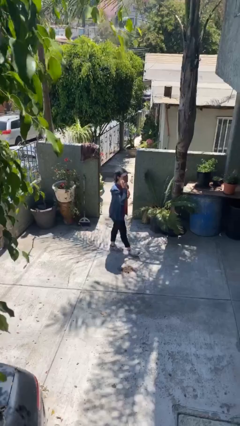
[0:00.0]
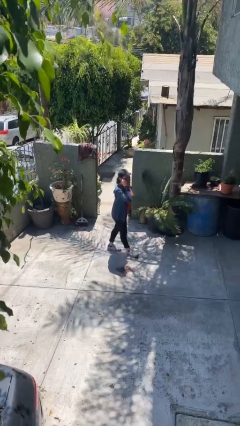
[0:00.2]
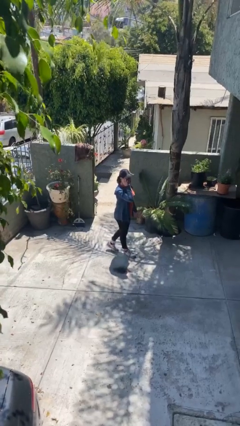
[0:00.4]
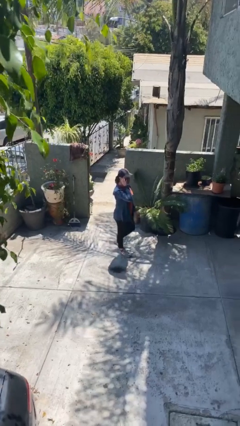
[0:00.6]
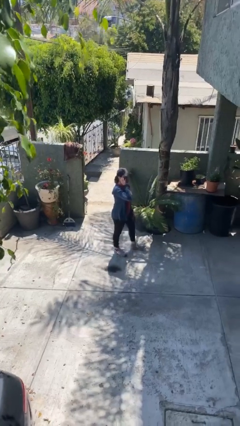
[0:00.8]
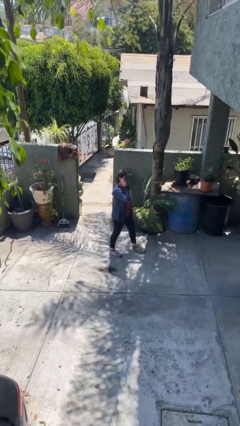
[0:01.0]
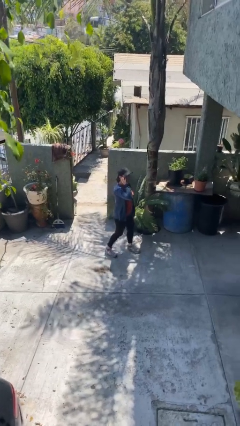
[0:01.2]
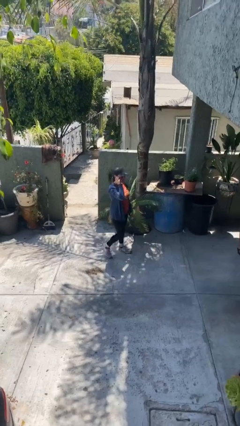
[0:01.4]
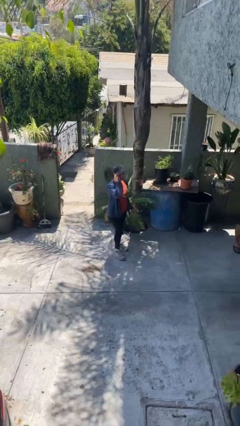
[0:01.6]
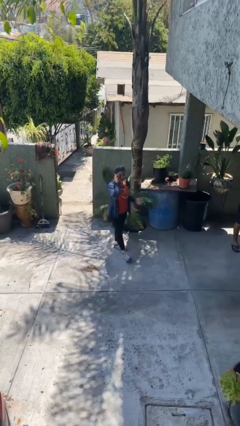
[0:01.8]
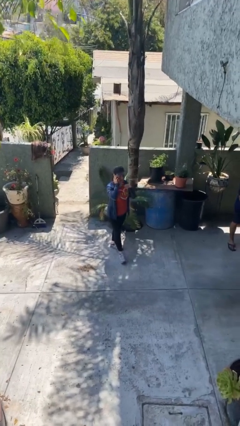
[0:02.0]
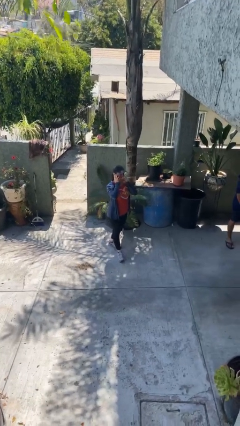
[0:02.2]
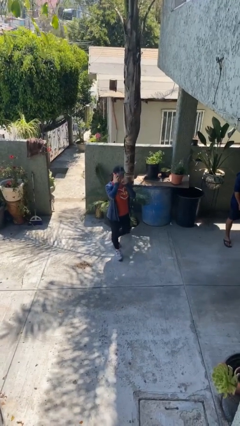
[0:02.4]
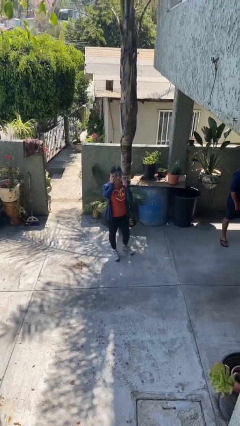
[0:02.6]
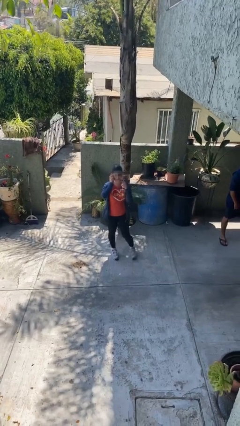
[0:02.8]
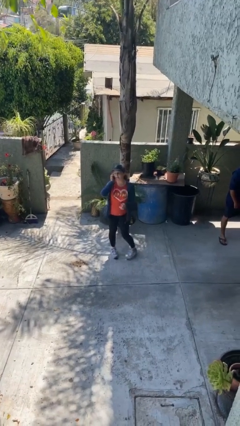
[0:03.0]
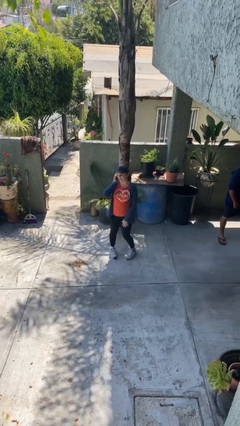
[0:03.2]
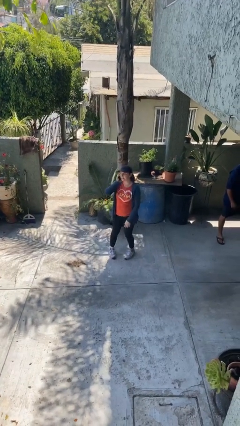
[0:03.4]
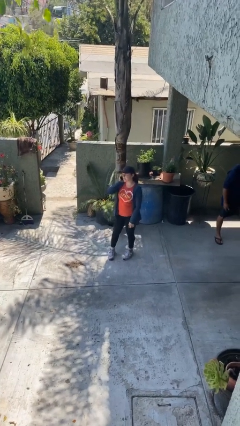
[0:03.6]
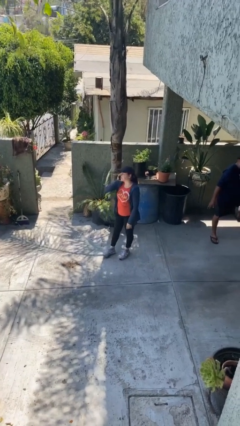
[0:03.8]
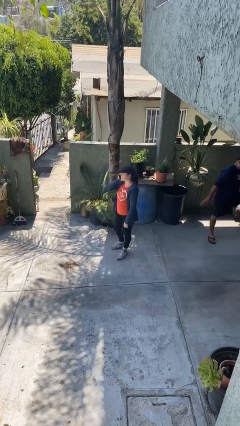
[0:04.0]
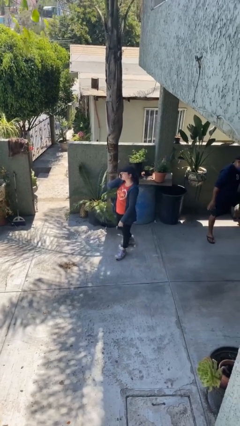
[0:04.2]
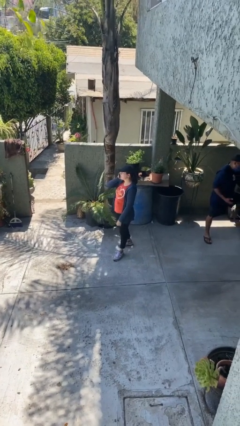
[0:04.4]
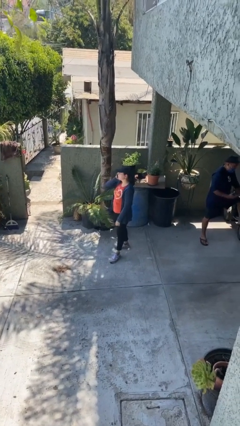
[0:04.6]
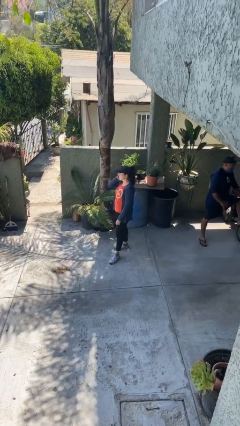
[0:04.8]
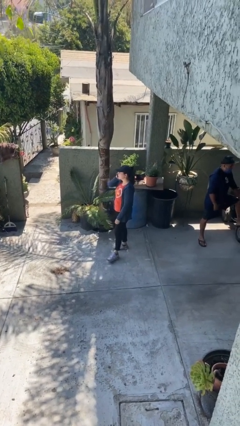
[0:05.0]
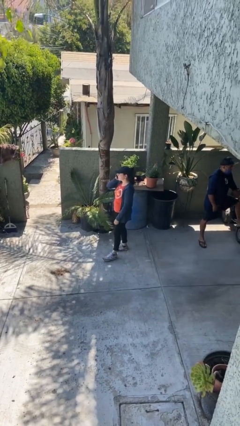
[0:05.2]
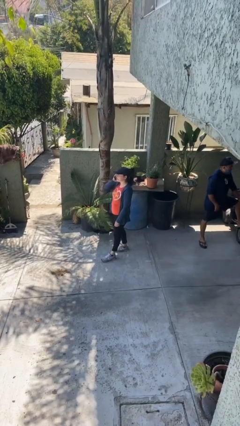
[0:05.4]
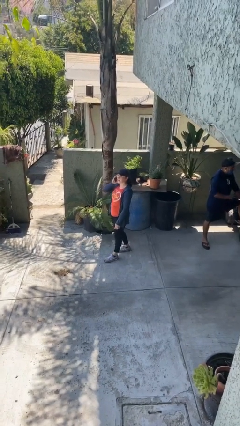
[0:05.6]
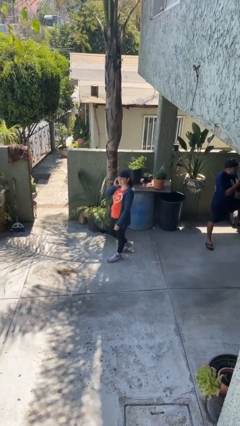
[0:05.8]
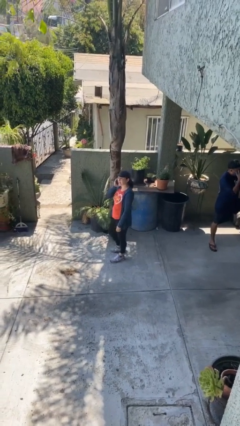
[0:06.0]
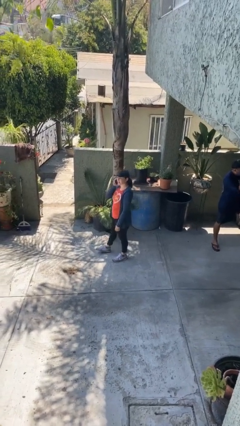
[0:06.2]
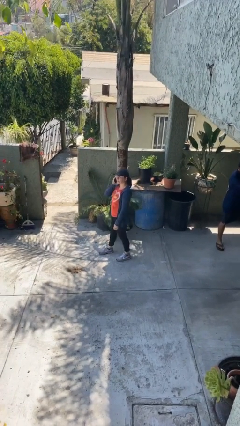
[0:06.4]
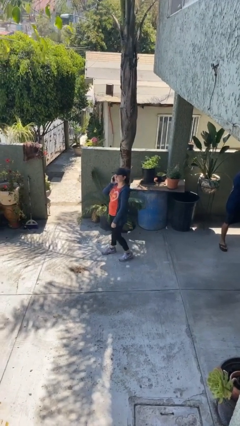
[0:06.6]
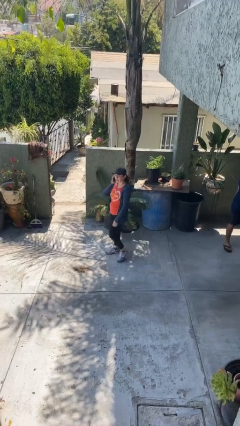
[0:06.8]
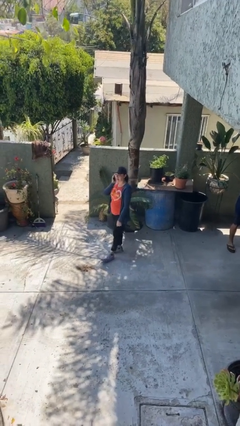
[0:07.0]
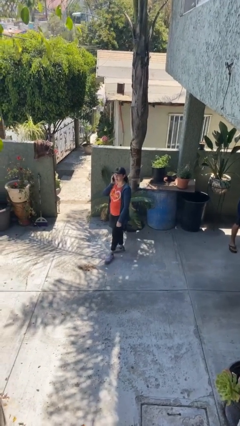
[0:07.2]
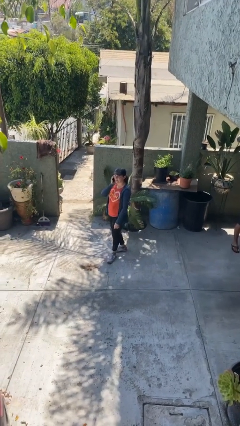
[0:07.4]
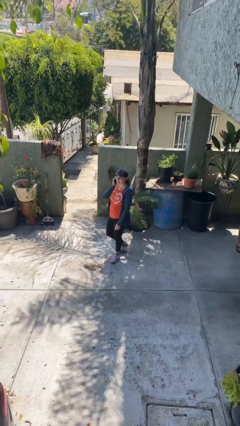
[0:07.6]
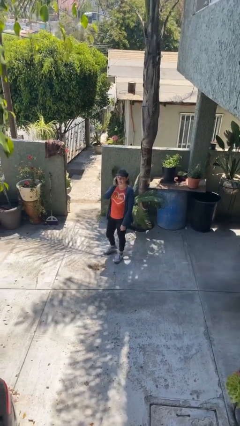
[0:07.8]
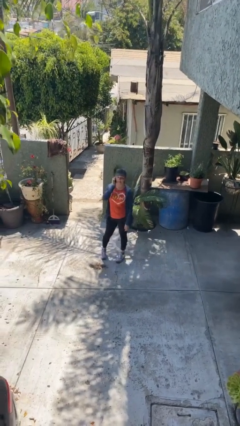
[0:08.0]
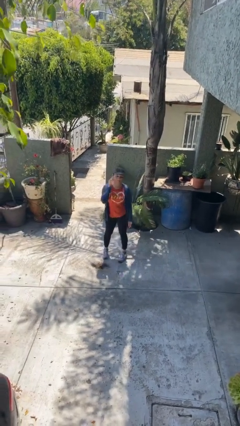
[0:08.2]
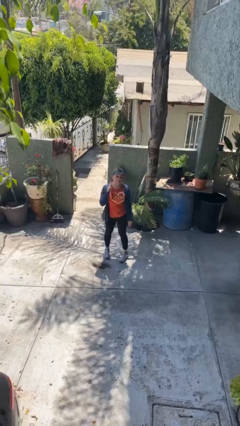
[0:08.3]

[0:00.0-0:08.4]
person talks on phone

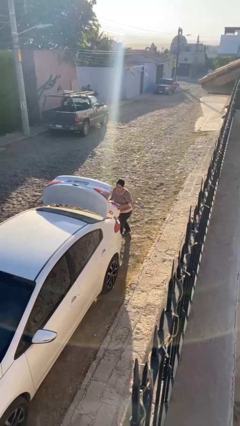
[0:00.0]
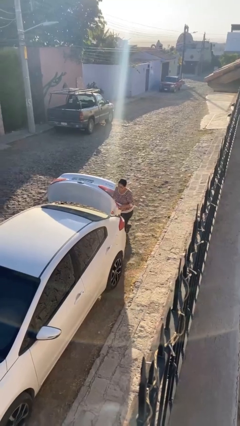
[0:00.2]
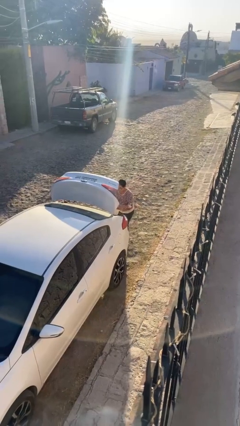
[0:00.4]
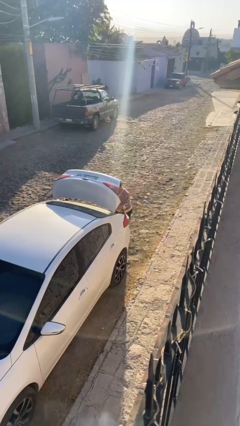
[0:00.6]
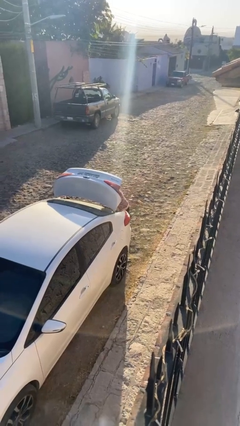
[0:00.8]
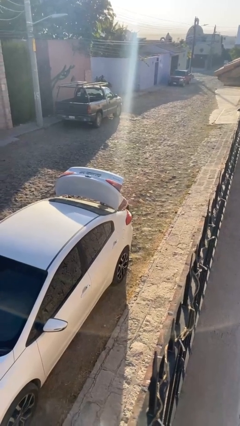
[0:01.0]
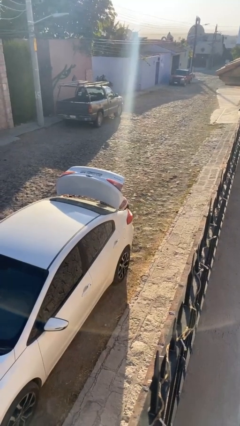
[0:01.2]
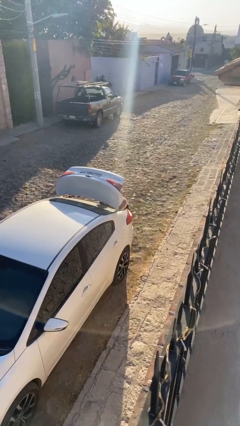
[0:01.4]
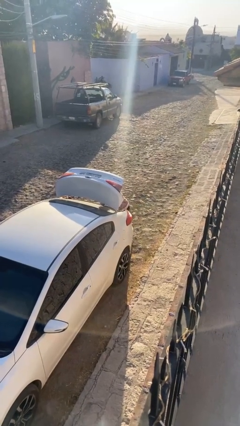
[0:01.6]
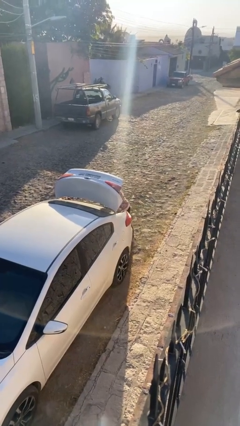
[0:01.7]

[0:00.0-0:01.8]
person loads car

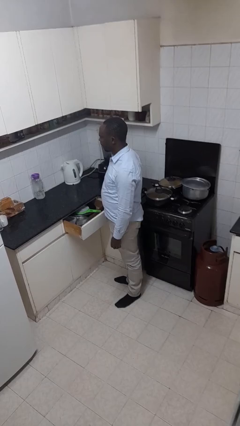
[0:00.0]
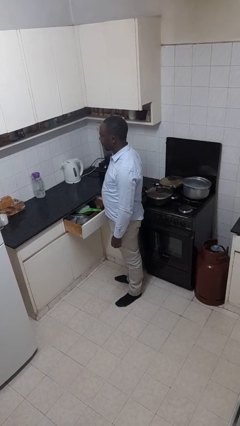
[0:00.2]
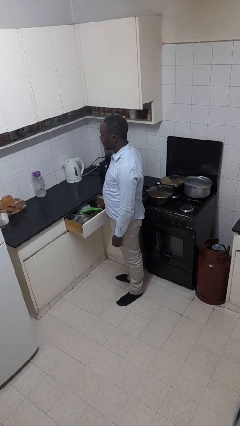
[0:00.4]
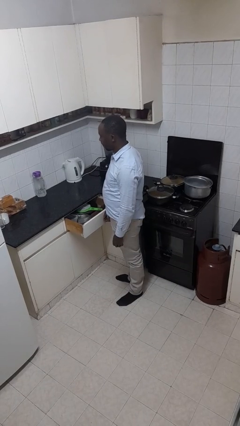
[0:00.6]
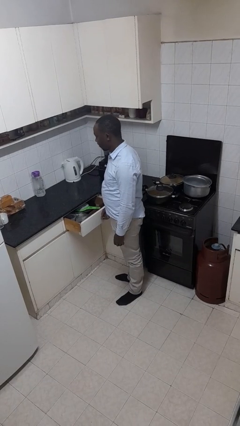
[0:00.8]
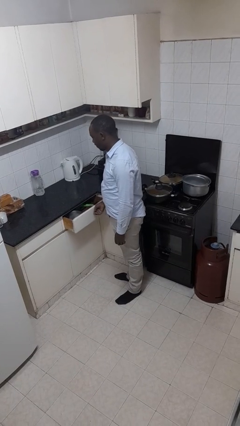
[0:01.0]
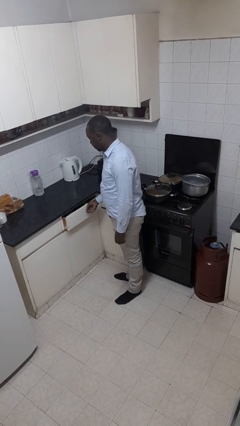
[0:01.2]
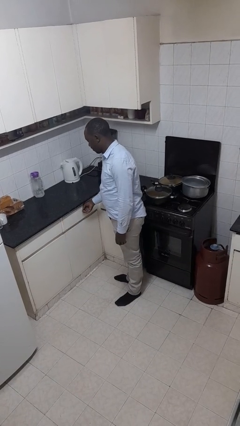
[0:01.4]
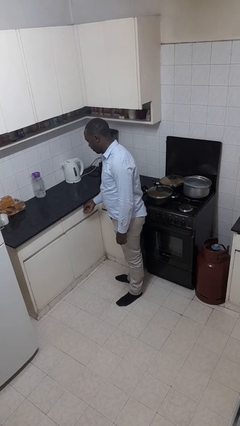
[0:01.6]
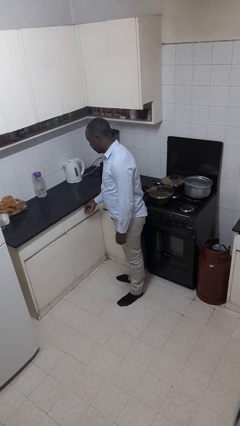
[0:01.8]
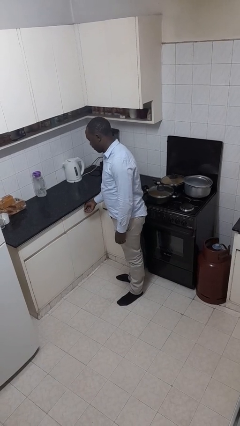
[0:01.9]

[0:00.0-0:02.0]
person closes kitchen drawer

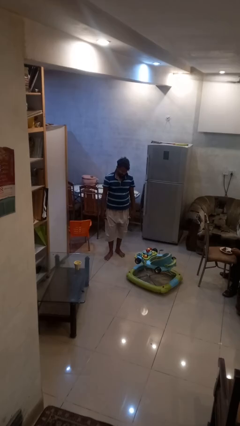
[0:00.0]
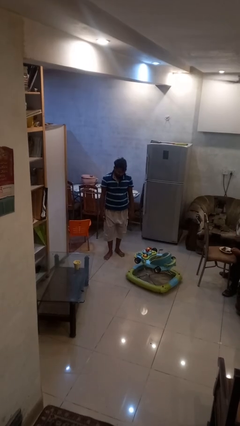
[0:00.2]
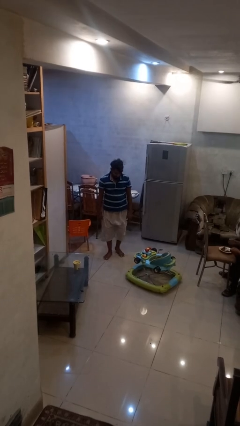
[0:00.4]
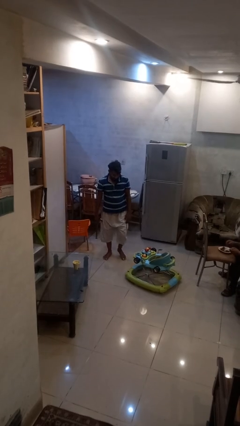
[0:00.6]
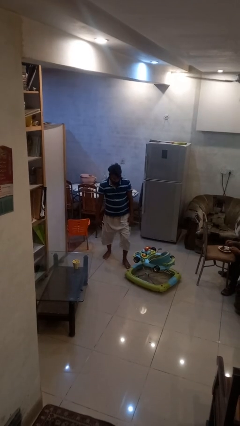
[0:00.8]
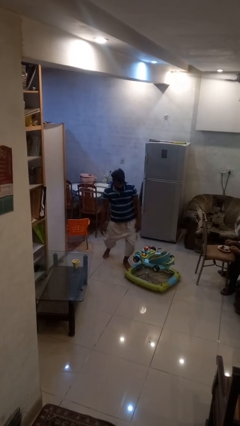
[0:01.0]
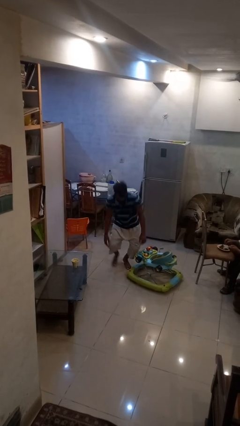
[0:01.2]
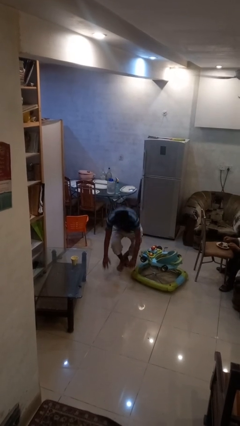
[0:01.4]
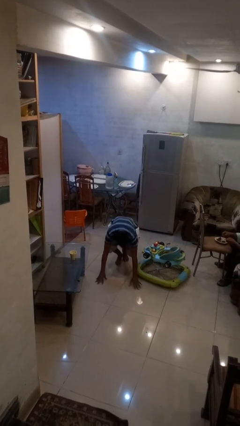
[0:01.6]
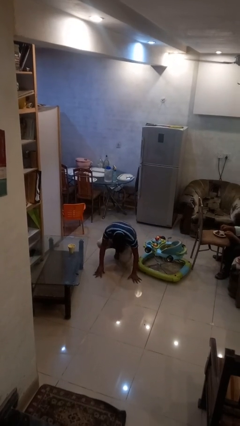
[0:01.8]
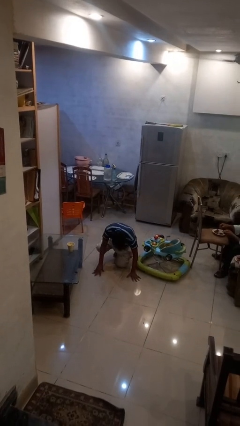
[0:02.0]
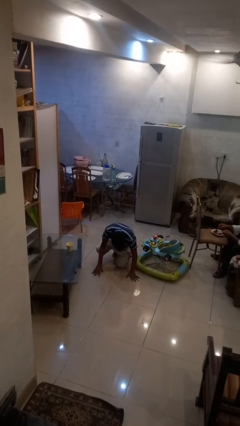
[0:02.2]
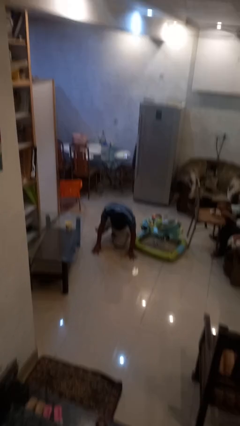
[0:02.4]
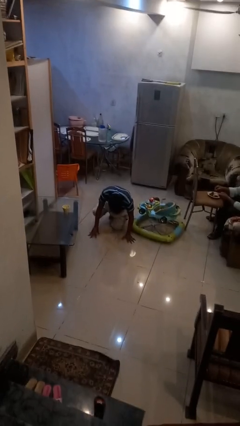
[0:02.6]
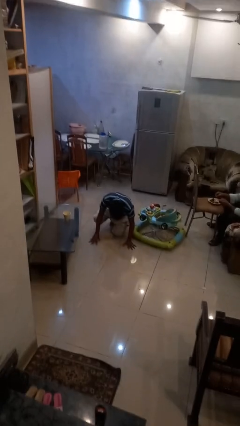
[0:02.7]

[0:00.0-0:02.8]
person trips on object on floor

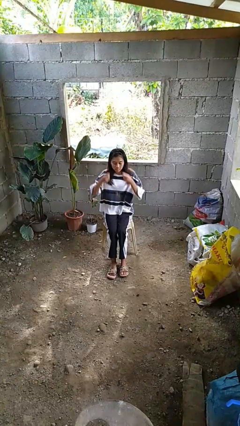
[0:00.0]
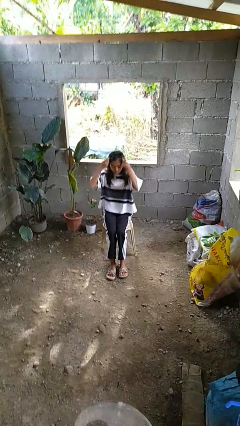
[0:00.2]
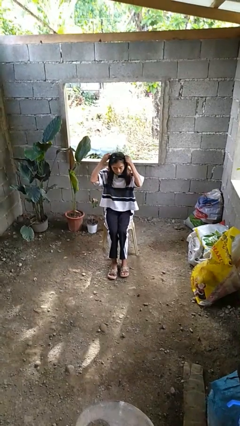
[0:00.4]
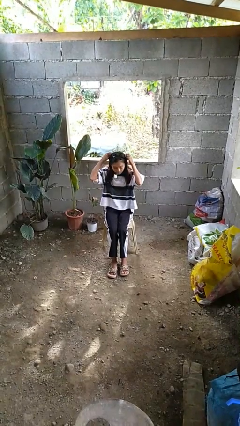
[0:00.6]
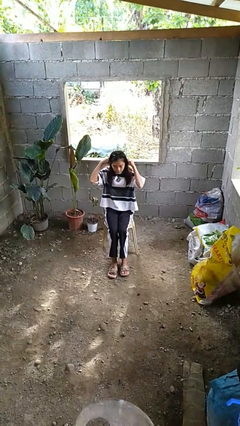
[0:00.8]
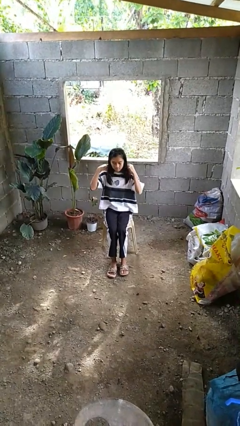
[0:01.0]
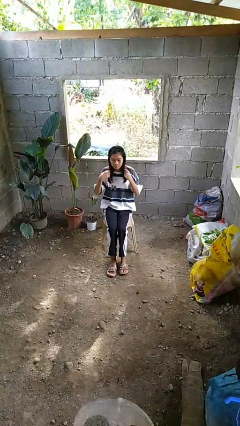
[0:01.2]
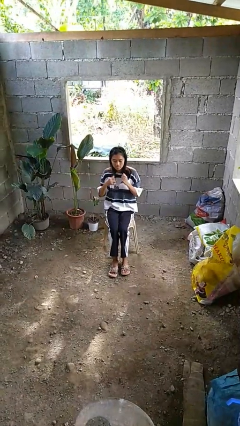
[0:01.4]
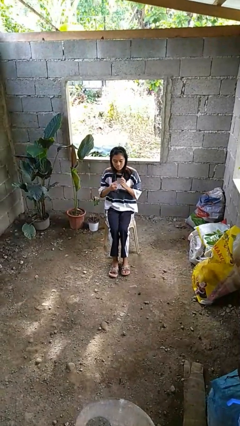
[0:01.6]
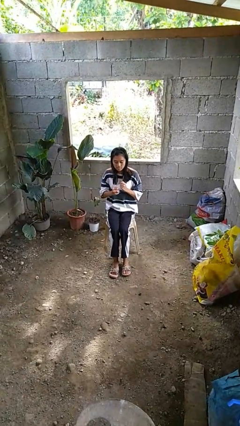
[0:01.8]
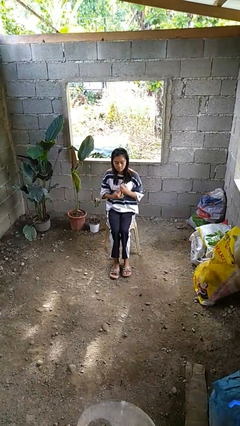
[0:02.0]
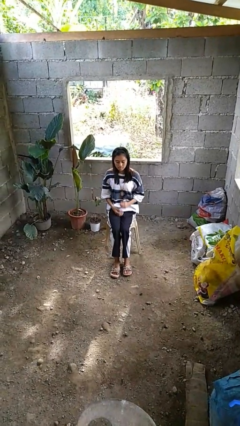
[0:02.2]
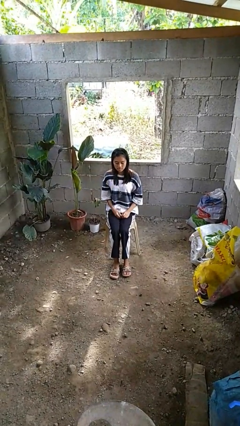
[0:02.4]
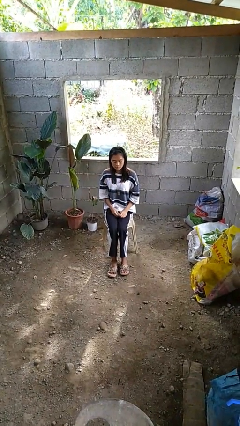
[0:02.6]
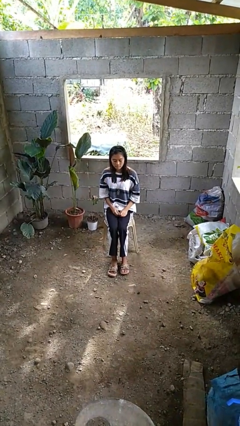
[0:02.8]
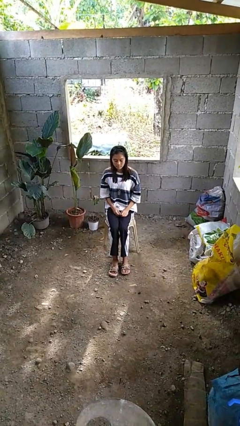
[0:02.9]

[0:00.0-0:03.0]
person puts on necklace
